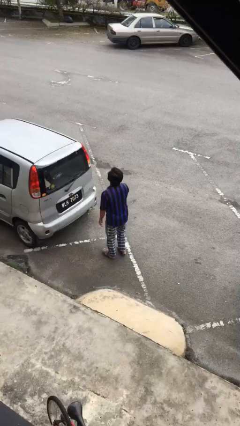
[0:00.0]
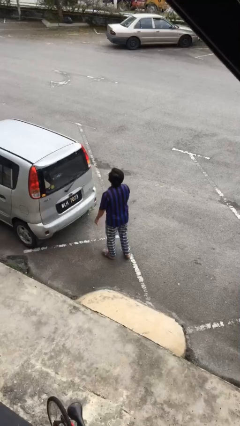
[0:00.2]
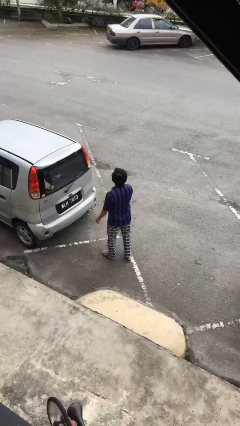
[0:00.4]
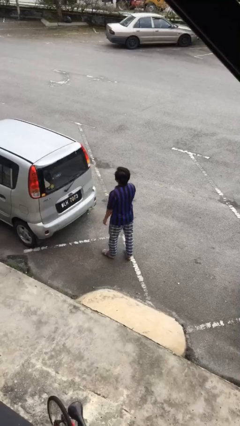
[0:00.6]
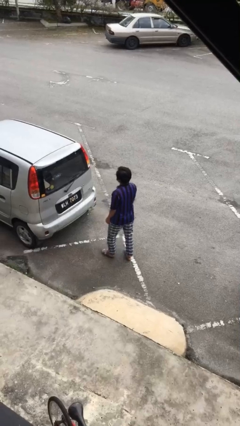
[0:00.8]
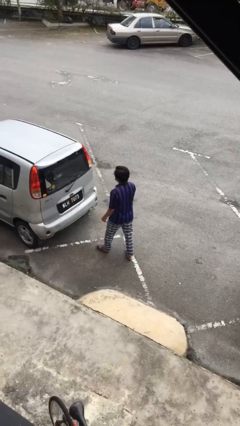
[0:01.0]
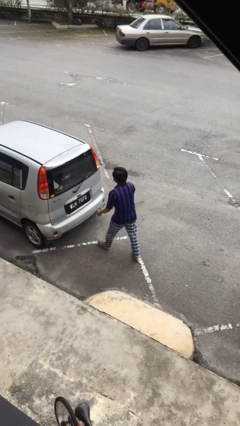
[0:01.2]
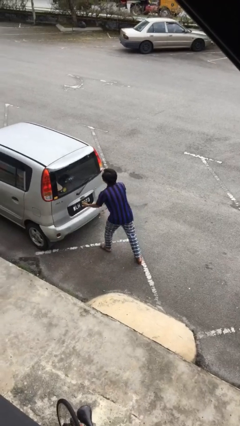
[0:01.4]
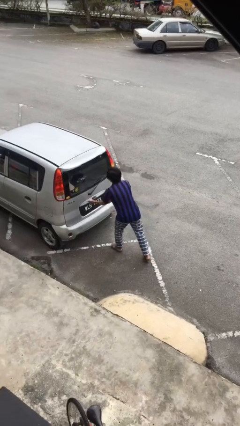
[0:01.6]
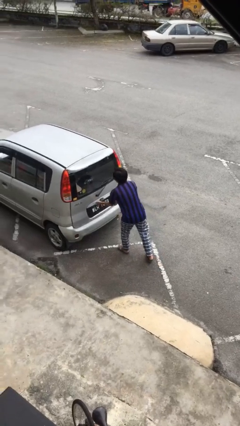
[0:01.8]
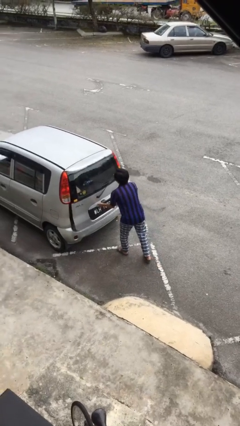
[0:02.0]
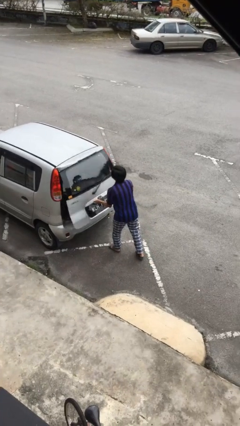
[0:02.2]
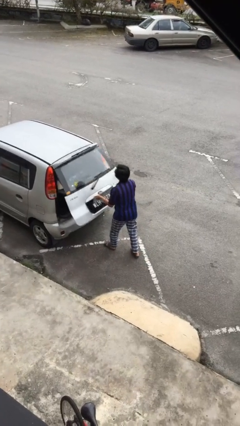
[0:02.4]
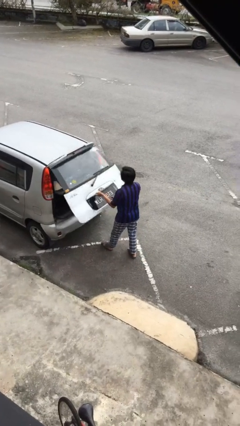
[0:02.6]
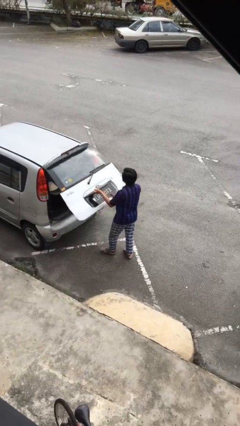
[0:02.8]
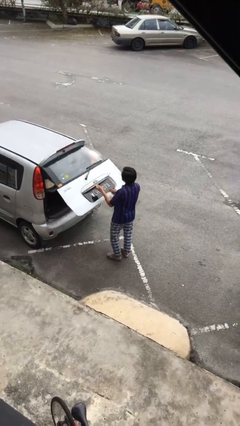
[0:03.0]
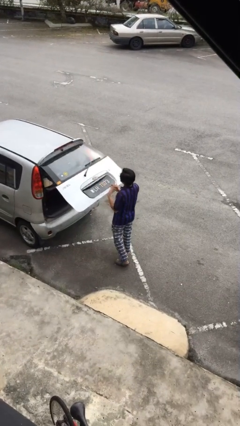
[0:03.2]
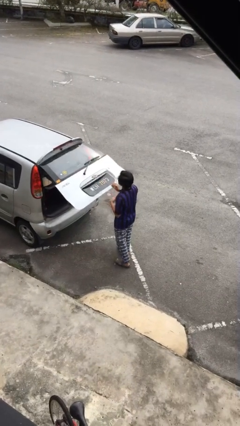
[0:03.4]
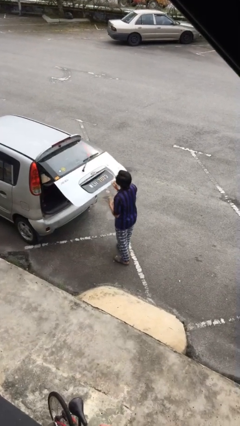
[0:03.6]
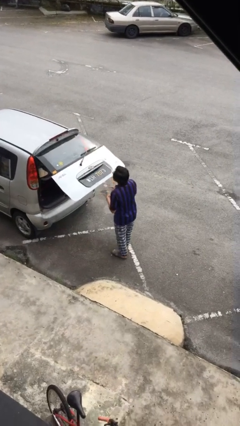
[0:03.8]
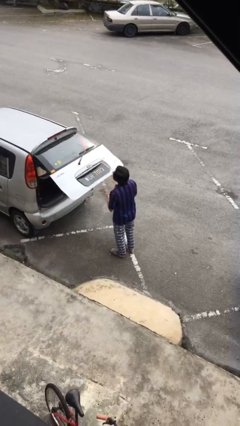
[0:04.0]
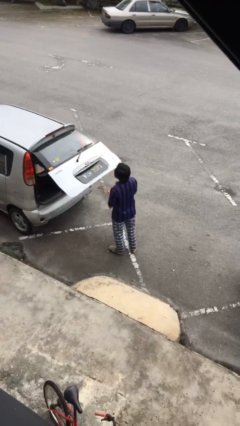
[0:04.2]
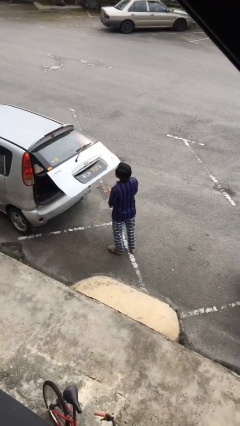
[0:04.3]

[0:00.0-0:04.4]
person opens car trunk

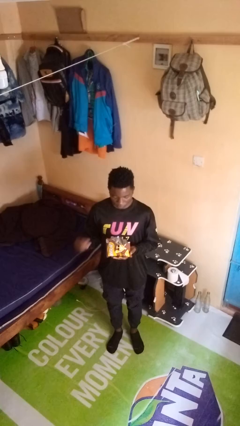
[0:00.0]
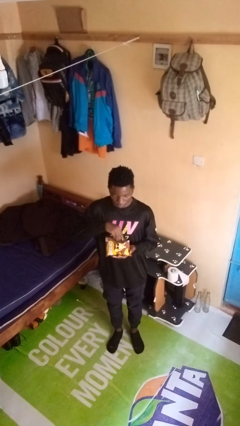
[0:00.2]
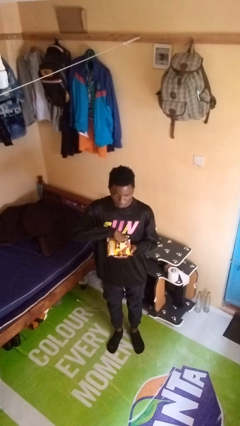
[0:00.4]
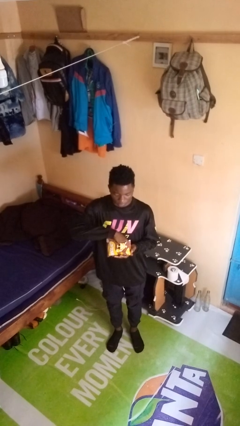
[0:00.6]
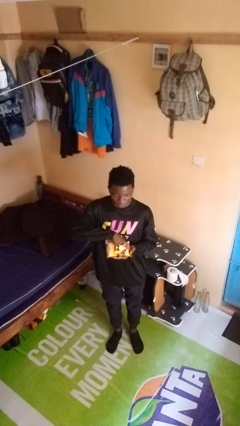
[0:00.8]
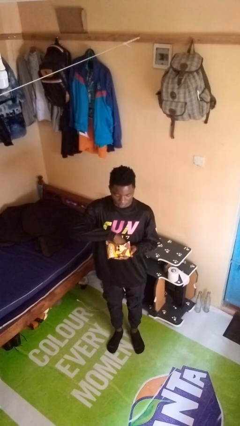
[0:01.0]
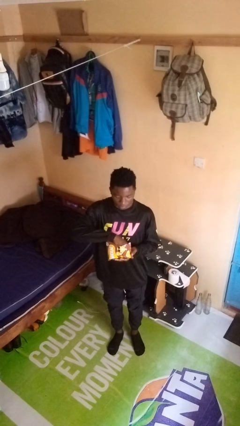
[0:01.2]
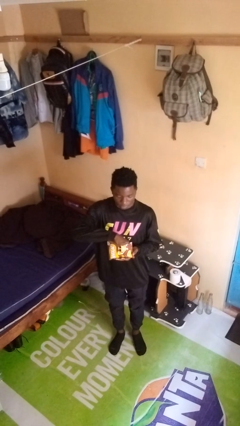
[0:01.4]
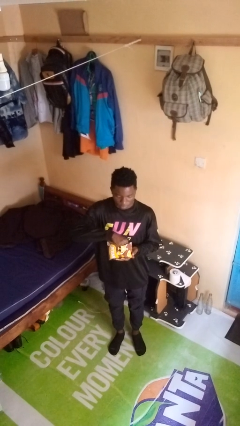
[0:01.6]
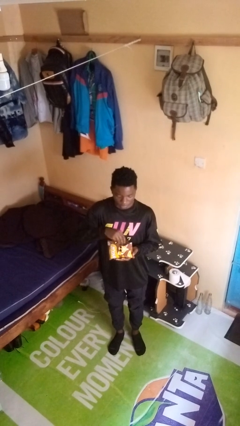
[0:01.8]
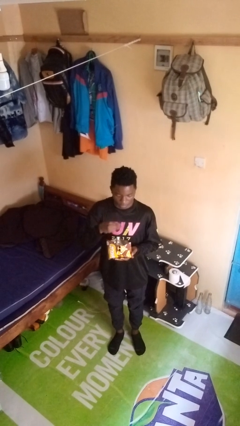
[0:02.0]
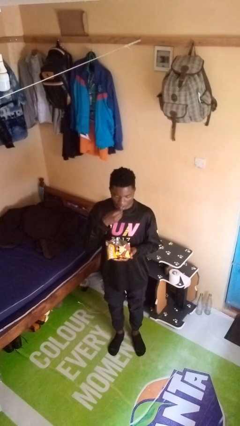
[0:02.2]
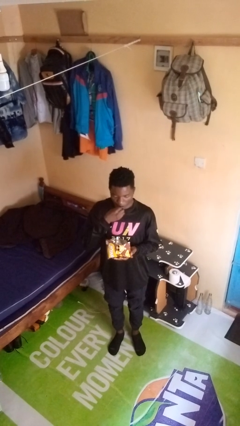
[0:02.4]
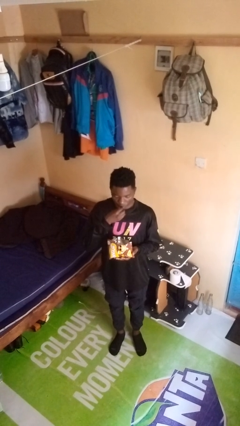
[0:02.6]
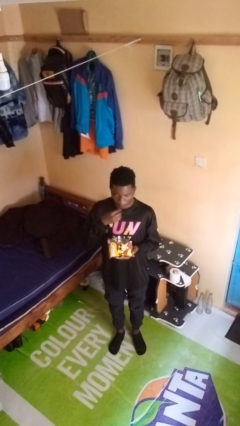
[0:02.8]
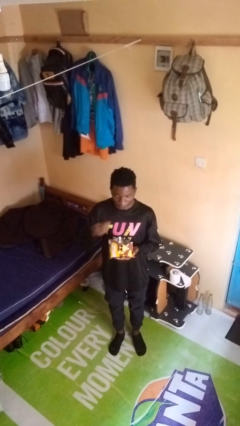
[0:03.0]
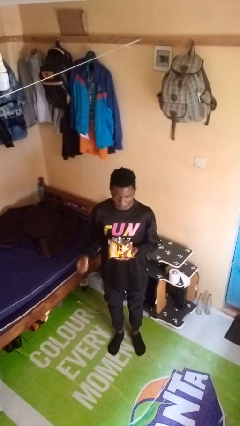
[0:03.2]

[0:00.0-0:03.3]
person eats snack from bag

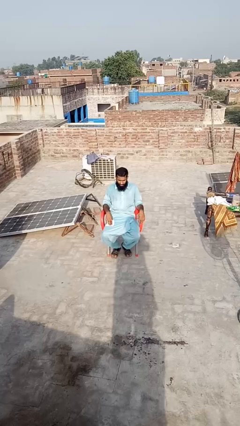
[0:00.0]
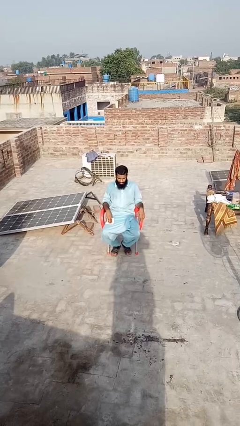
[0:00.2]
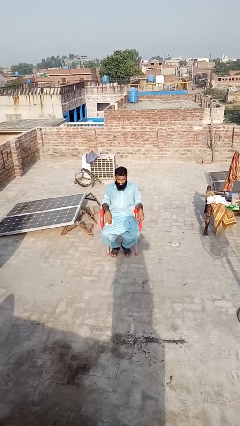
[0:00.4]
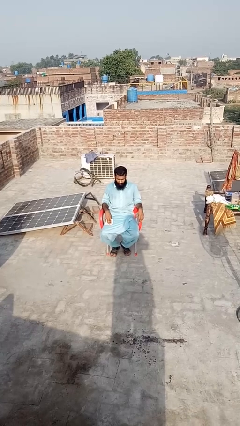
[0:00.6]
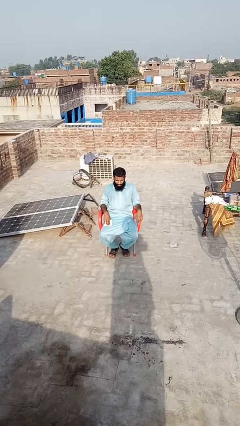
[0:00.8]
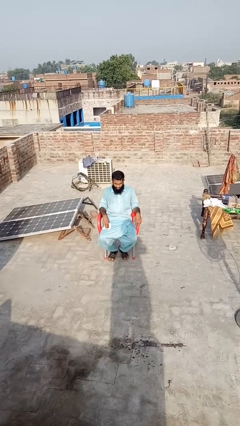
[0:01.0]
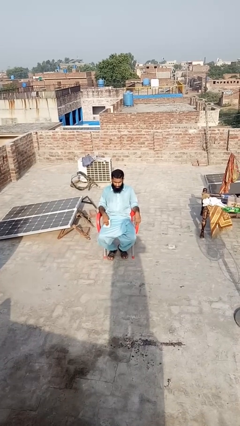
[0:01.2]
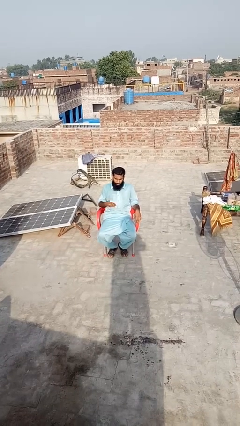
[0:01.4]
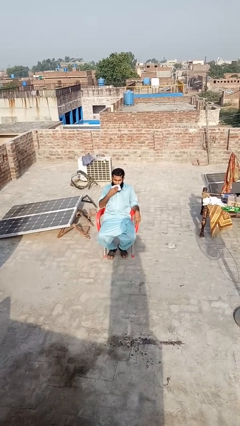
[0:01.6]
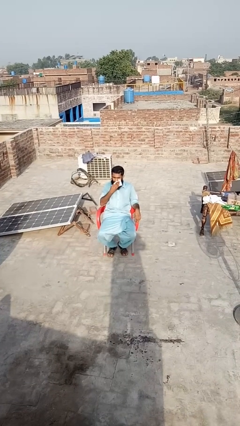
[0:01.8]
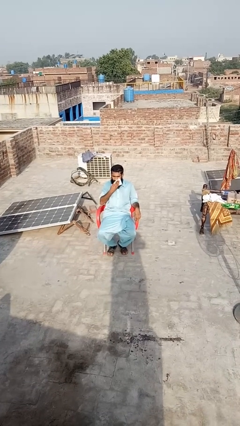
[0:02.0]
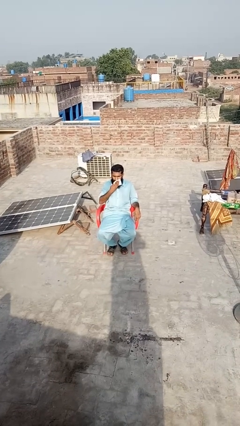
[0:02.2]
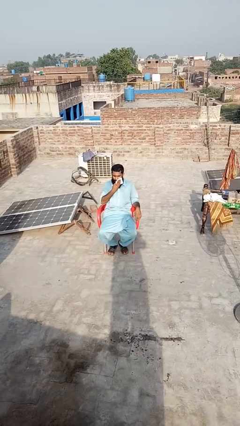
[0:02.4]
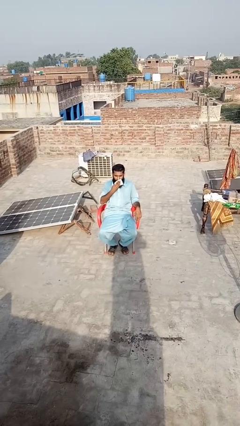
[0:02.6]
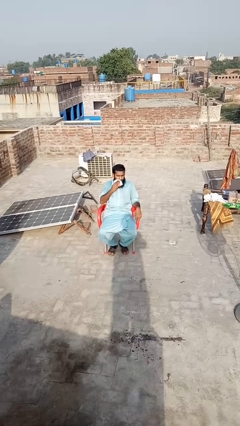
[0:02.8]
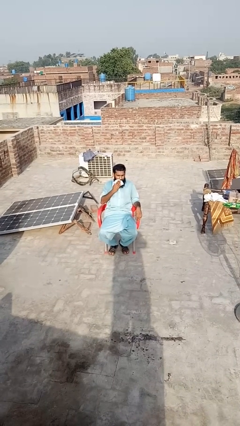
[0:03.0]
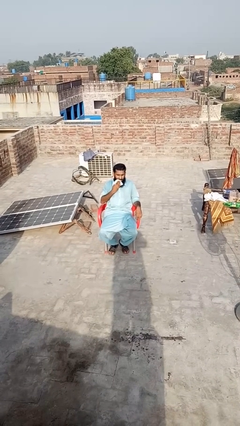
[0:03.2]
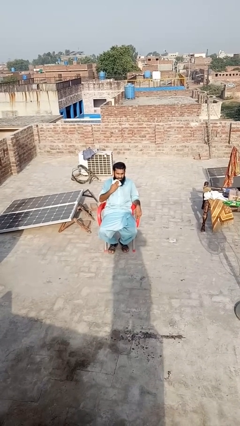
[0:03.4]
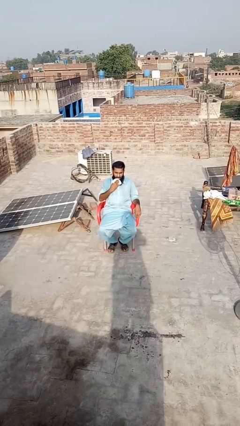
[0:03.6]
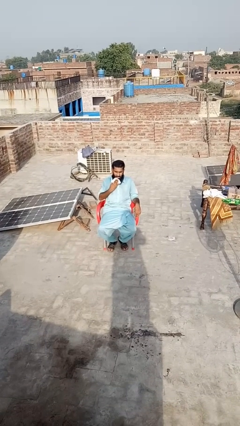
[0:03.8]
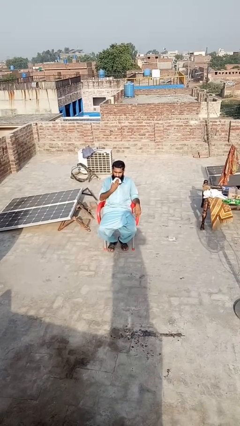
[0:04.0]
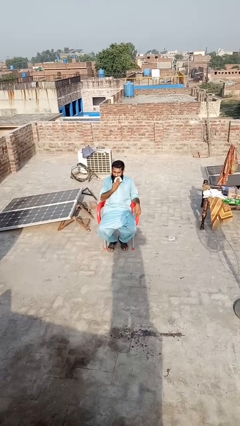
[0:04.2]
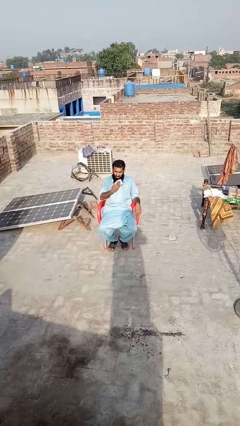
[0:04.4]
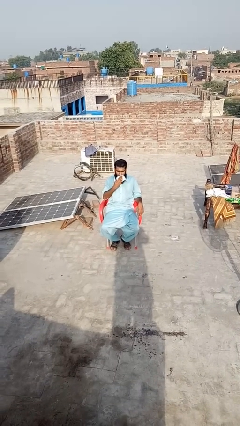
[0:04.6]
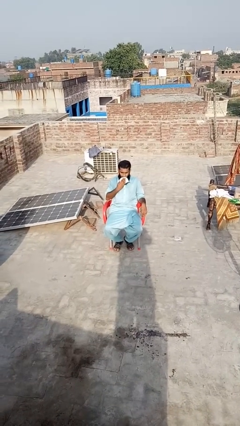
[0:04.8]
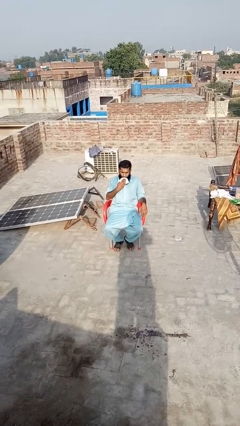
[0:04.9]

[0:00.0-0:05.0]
person wipes mouth with napkin

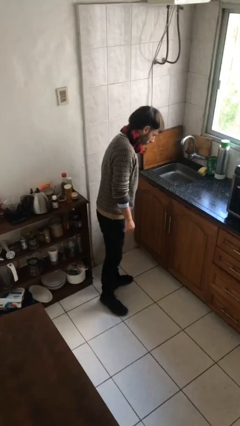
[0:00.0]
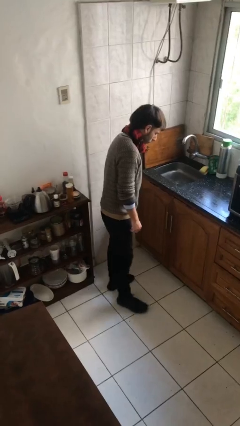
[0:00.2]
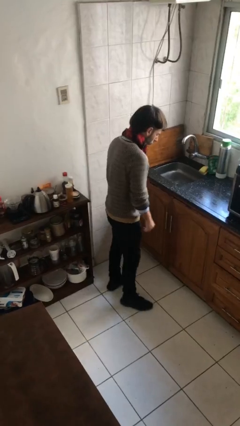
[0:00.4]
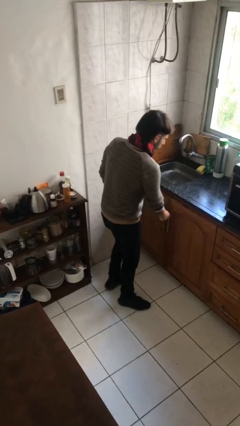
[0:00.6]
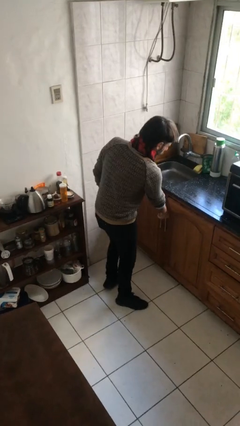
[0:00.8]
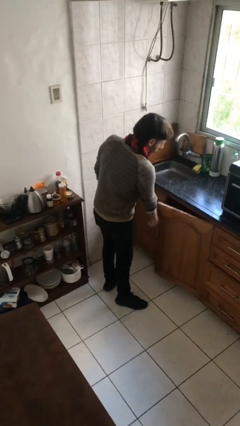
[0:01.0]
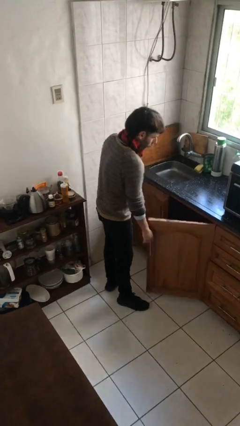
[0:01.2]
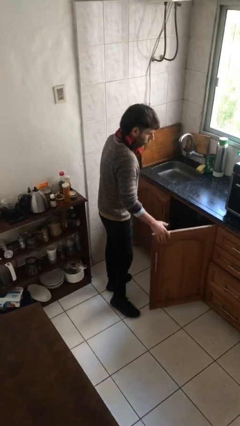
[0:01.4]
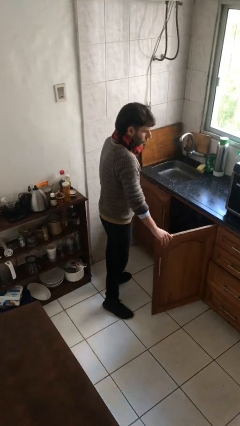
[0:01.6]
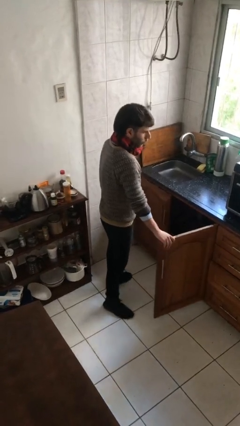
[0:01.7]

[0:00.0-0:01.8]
person closes cabinet

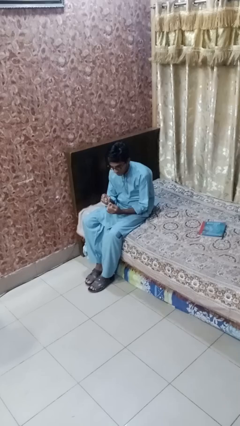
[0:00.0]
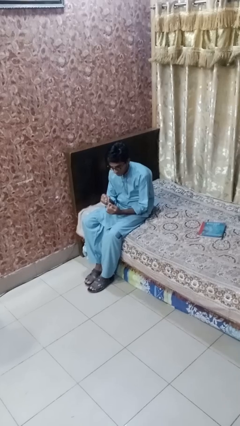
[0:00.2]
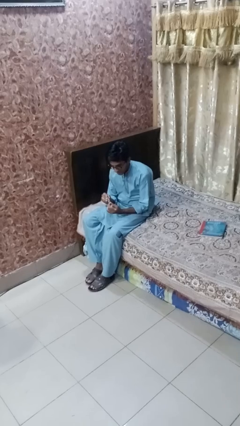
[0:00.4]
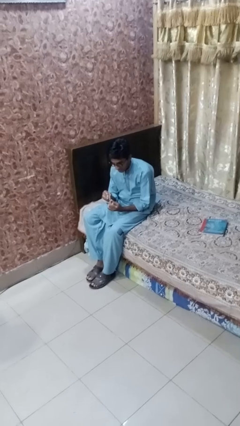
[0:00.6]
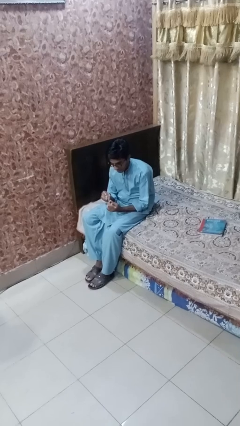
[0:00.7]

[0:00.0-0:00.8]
person clips fingernails

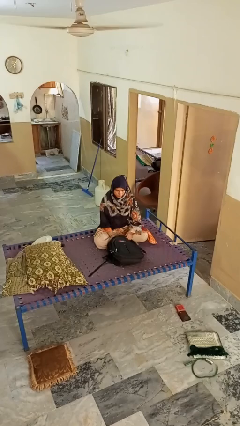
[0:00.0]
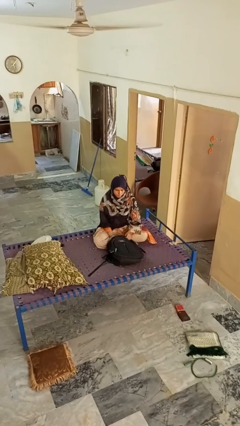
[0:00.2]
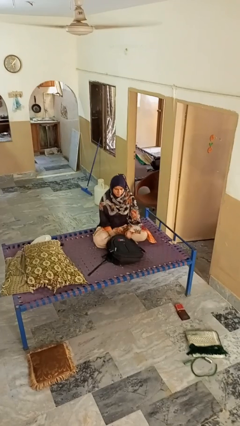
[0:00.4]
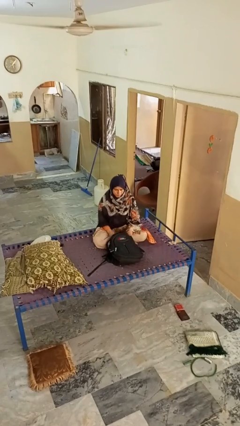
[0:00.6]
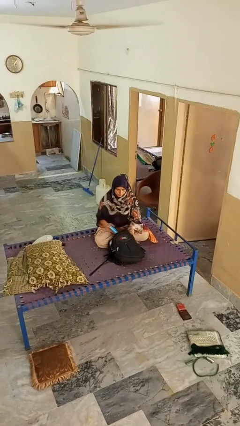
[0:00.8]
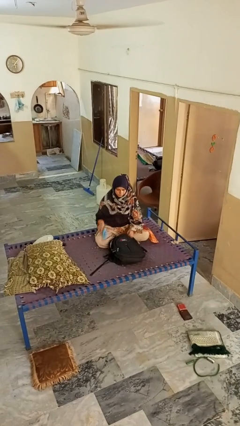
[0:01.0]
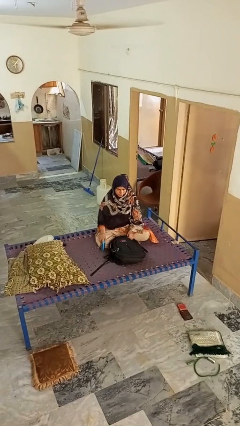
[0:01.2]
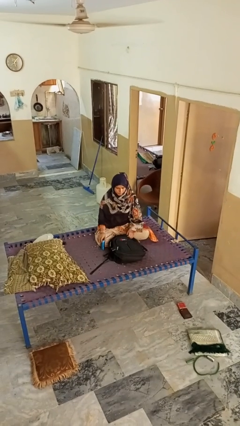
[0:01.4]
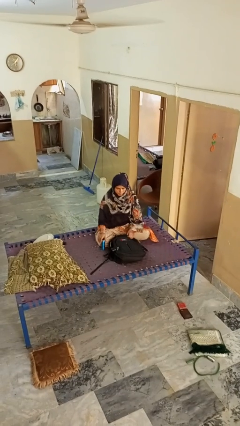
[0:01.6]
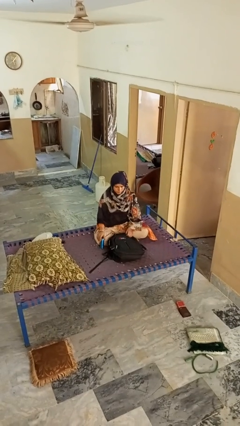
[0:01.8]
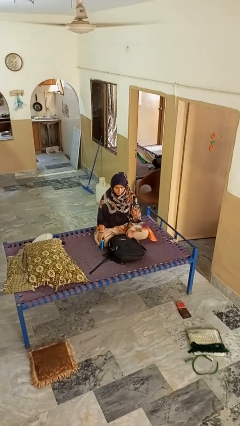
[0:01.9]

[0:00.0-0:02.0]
person takes object from bag
